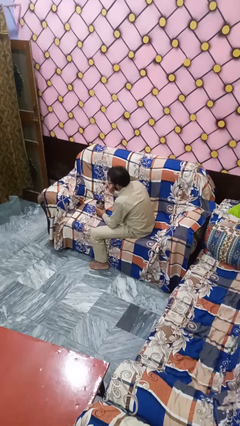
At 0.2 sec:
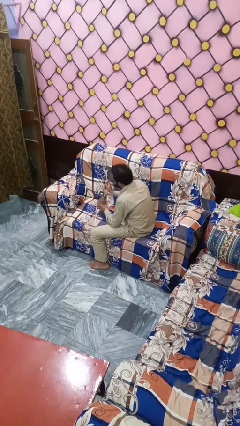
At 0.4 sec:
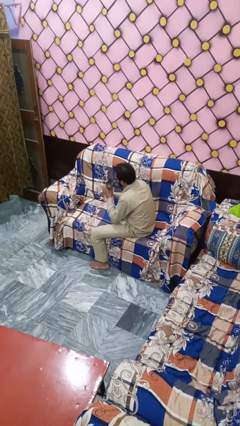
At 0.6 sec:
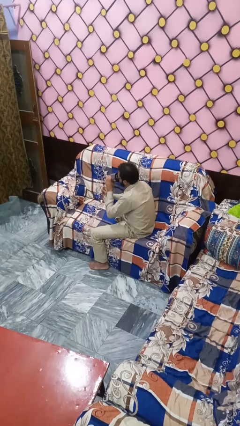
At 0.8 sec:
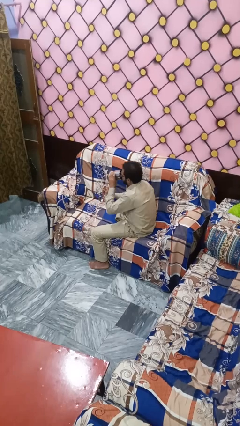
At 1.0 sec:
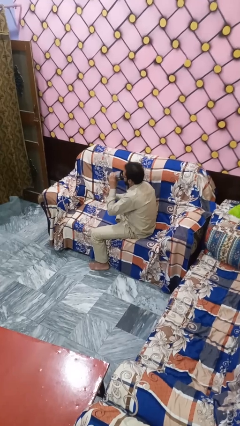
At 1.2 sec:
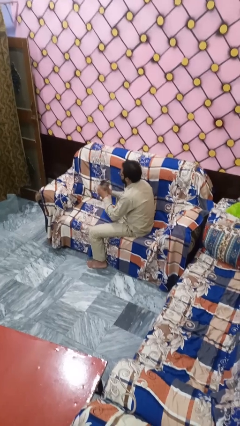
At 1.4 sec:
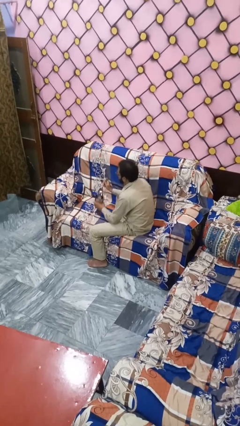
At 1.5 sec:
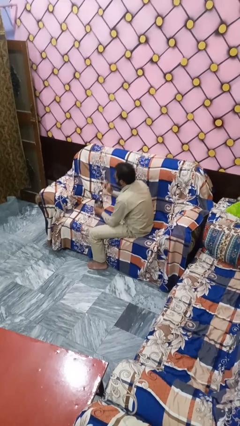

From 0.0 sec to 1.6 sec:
person drinks from mug

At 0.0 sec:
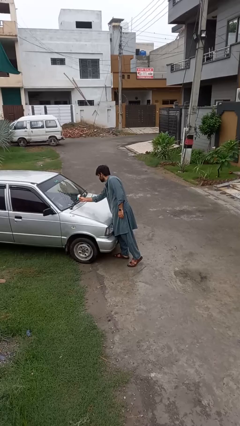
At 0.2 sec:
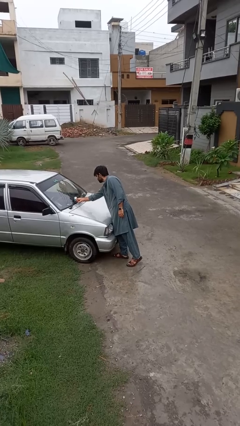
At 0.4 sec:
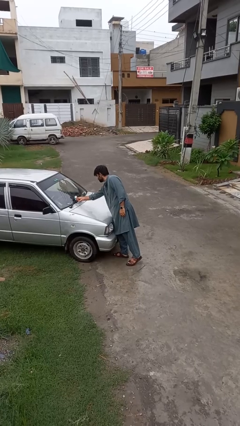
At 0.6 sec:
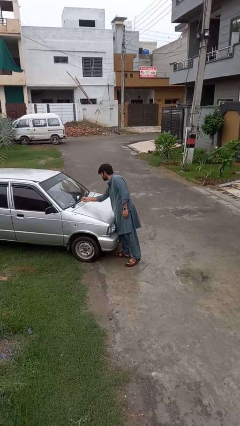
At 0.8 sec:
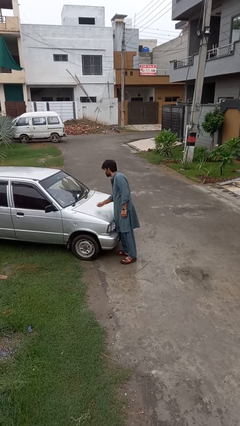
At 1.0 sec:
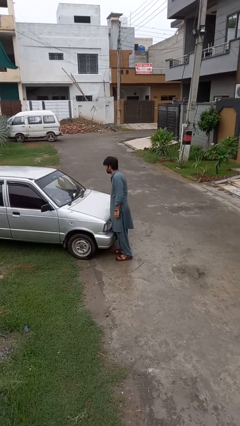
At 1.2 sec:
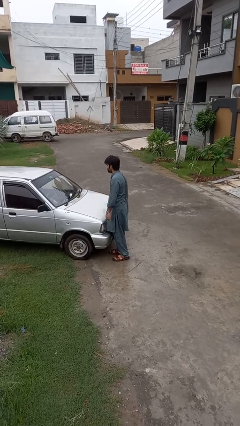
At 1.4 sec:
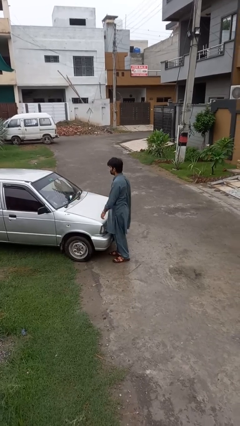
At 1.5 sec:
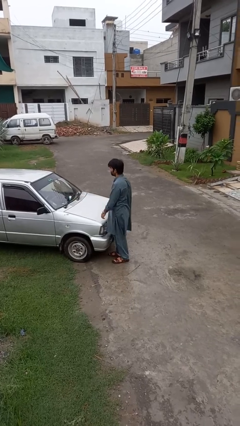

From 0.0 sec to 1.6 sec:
person flips down car wipers

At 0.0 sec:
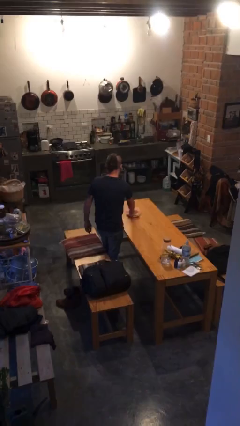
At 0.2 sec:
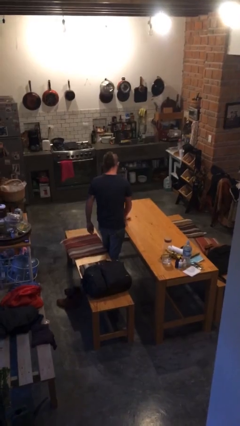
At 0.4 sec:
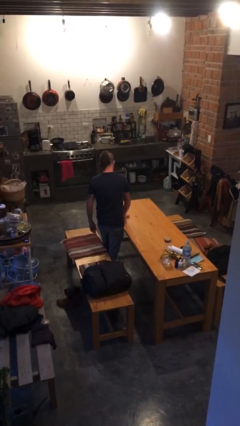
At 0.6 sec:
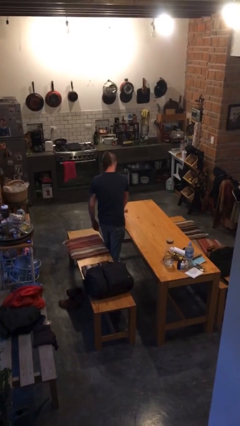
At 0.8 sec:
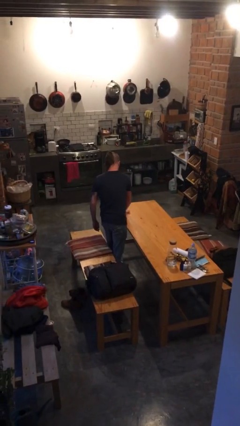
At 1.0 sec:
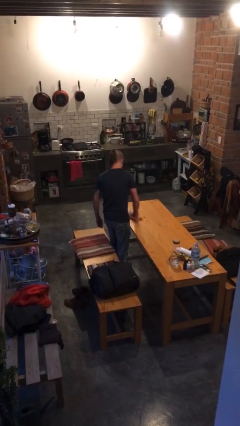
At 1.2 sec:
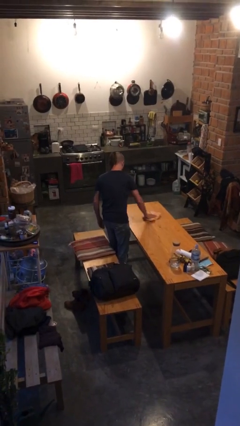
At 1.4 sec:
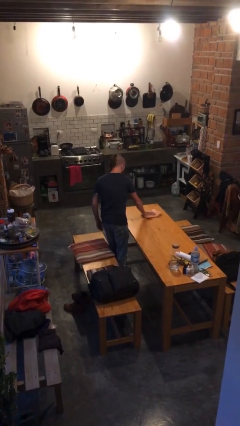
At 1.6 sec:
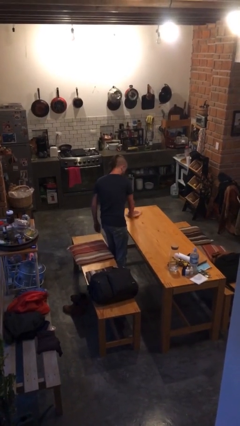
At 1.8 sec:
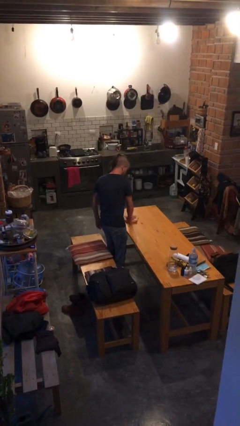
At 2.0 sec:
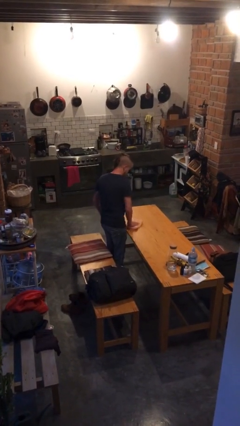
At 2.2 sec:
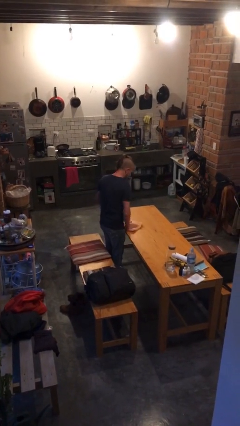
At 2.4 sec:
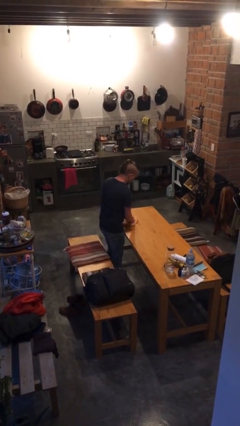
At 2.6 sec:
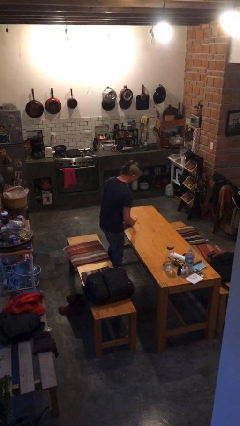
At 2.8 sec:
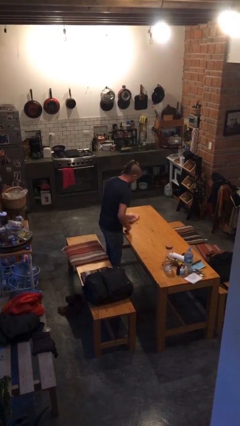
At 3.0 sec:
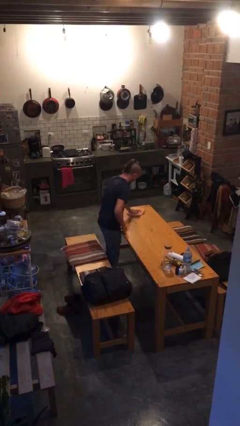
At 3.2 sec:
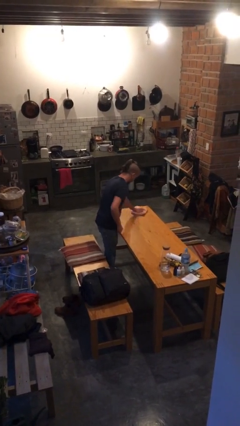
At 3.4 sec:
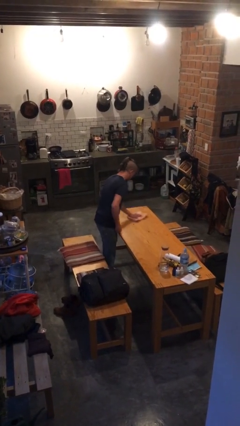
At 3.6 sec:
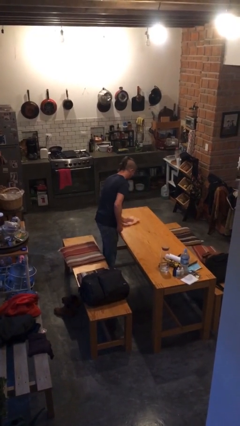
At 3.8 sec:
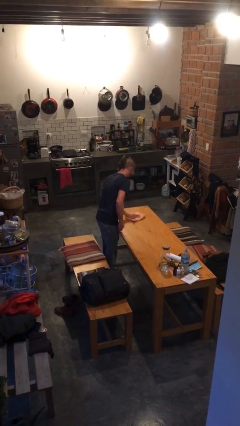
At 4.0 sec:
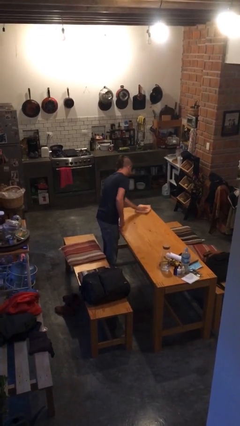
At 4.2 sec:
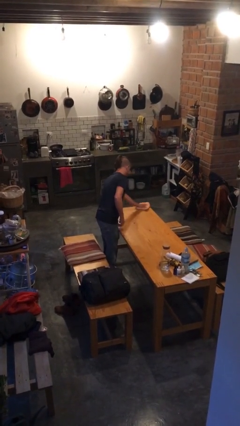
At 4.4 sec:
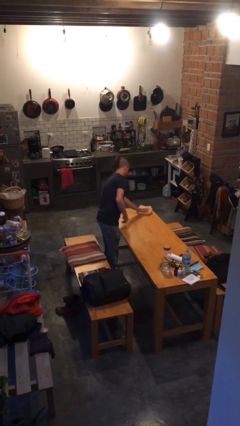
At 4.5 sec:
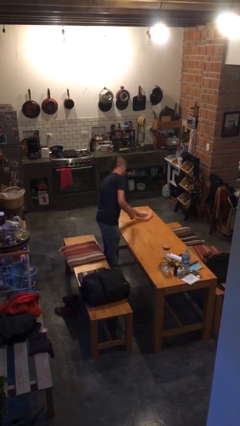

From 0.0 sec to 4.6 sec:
person cleans table with rag

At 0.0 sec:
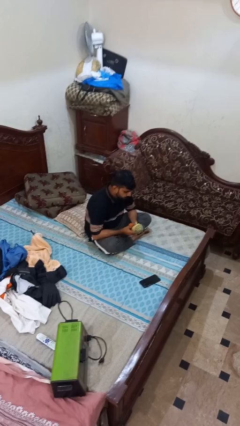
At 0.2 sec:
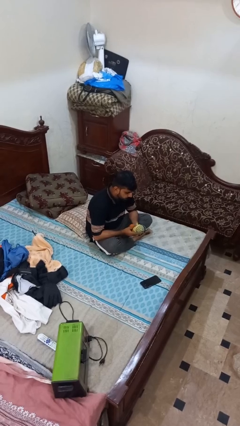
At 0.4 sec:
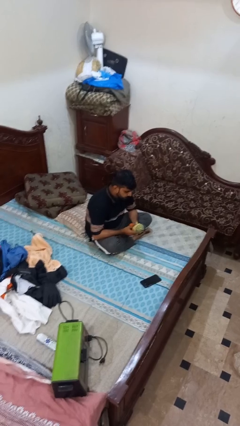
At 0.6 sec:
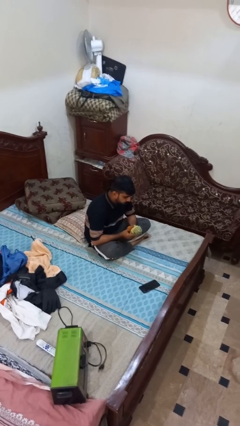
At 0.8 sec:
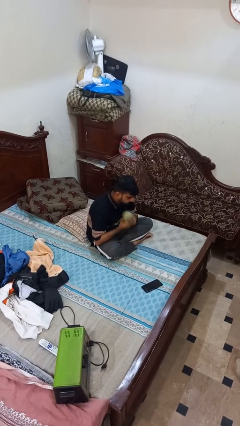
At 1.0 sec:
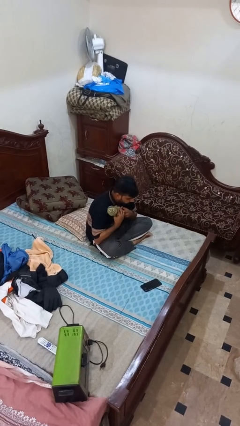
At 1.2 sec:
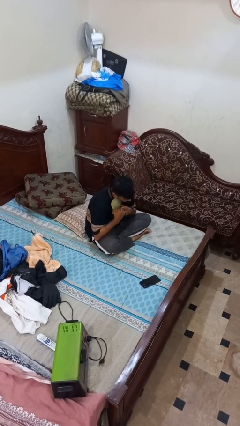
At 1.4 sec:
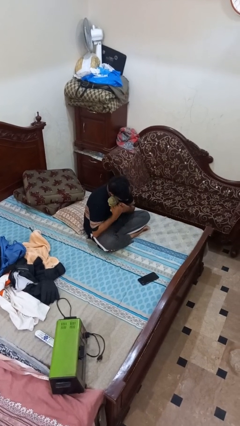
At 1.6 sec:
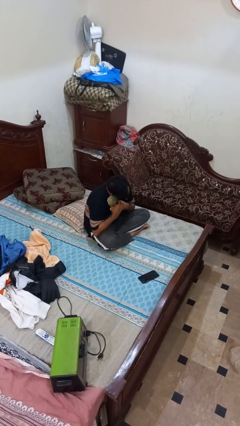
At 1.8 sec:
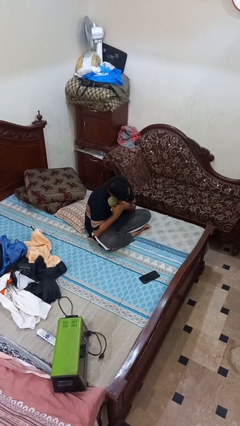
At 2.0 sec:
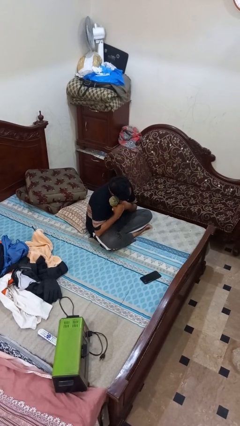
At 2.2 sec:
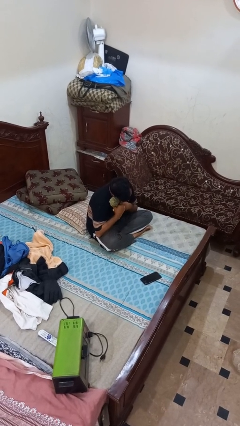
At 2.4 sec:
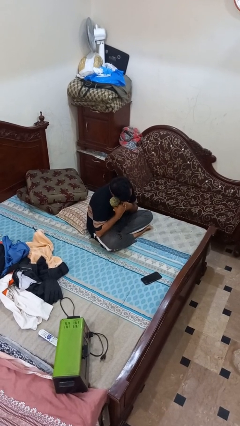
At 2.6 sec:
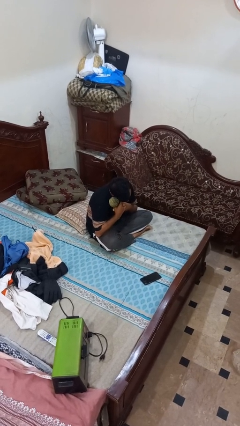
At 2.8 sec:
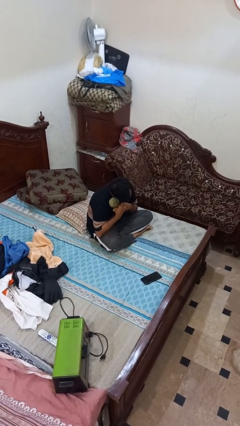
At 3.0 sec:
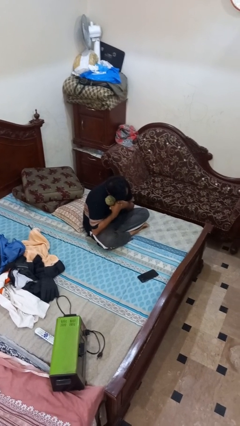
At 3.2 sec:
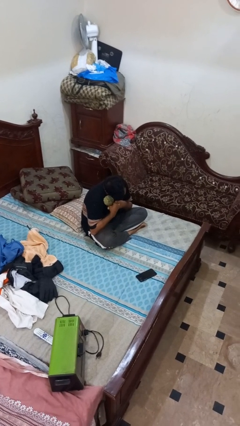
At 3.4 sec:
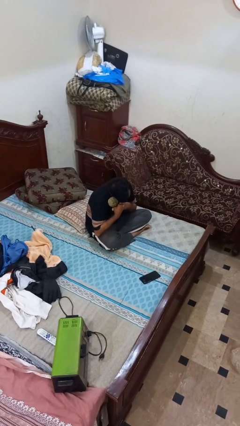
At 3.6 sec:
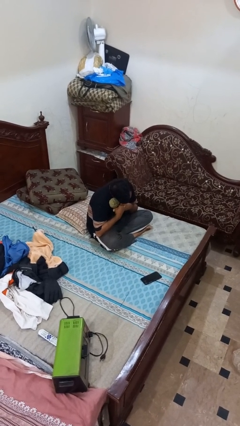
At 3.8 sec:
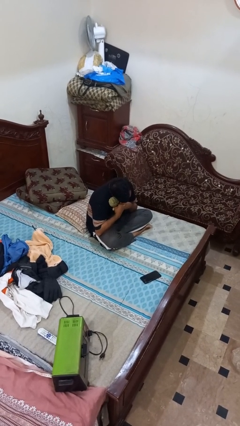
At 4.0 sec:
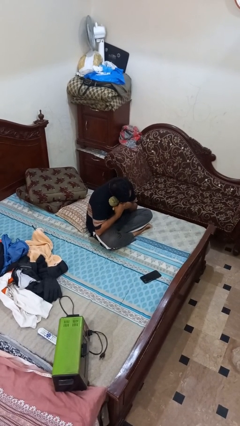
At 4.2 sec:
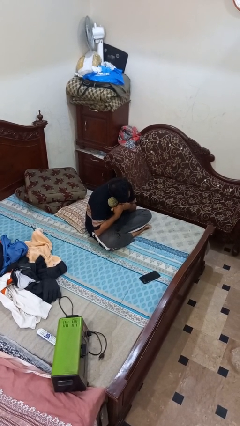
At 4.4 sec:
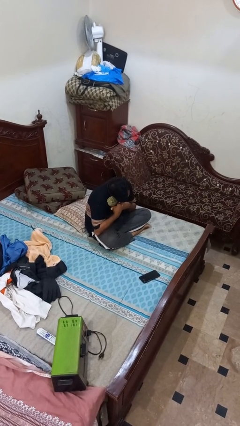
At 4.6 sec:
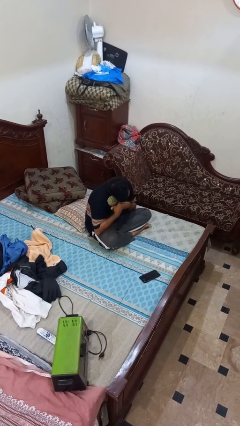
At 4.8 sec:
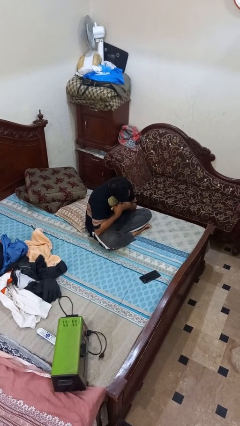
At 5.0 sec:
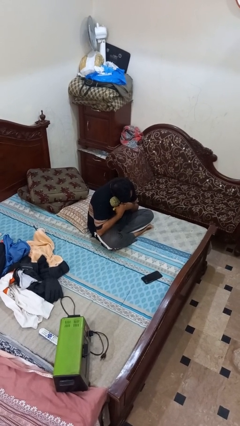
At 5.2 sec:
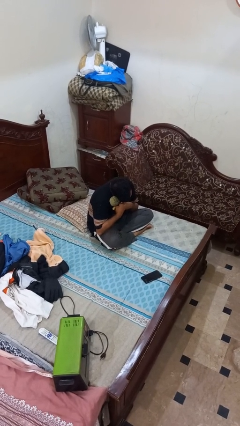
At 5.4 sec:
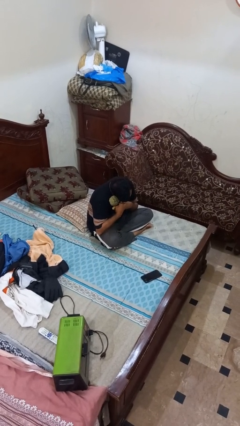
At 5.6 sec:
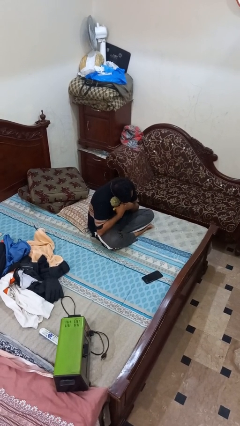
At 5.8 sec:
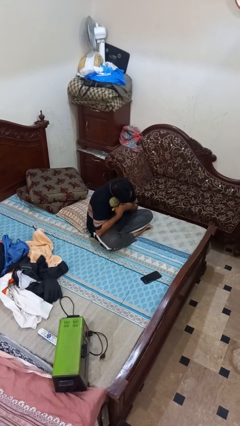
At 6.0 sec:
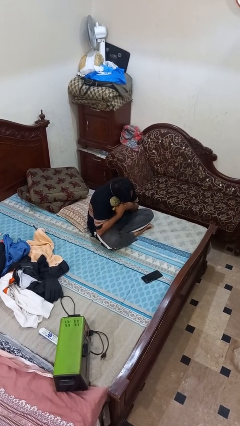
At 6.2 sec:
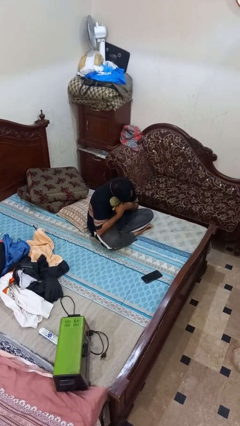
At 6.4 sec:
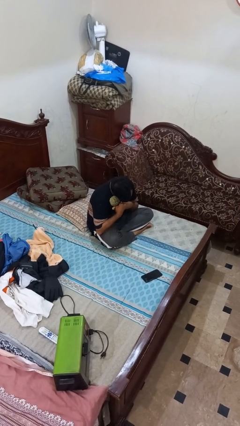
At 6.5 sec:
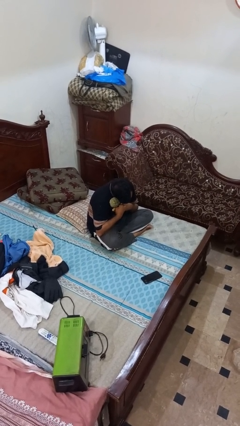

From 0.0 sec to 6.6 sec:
person hugs stuffed animal

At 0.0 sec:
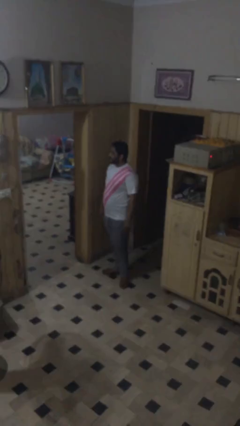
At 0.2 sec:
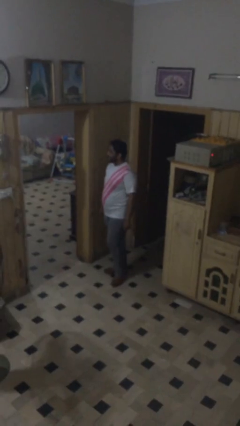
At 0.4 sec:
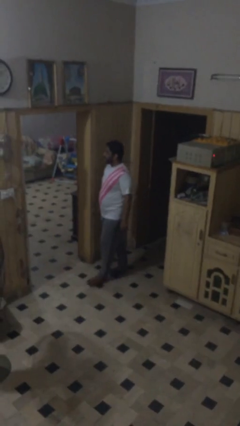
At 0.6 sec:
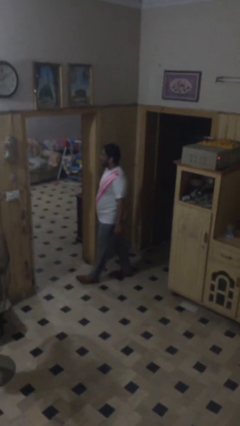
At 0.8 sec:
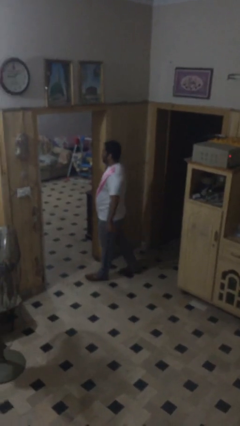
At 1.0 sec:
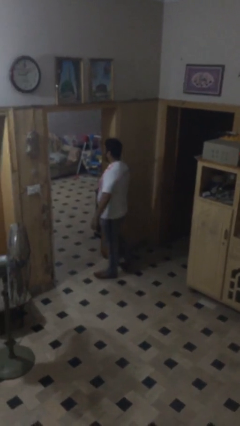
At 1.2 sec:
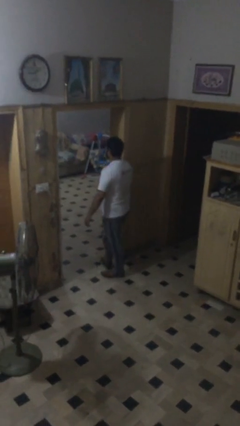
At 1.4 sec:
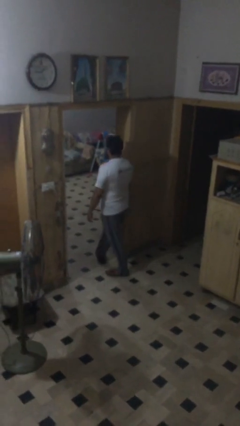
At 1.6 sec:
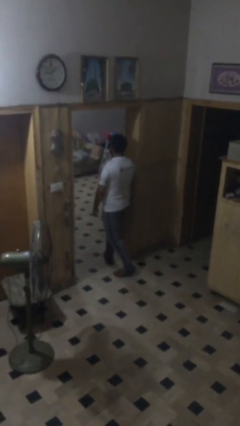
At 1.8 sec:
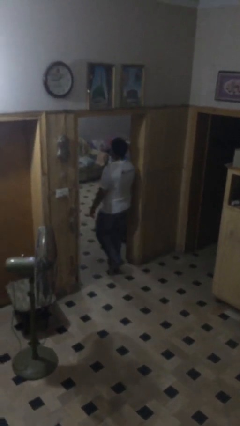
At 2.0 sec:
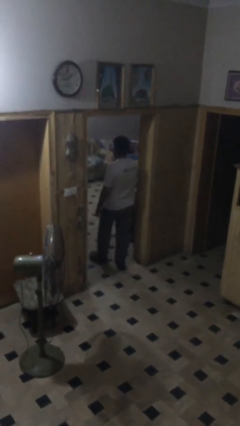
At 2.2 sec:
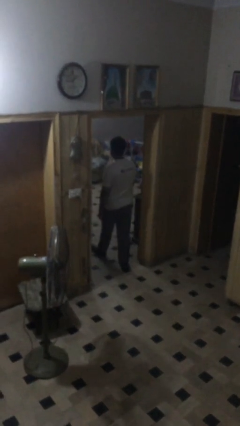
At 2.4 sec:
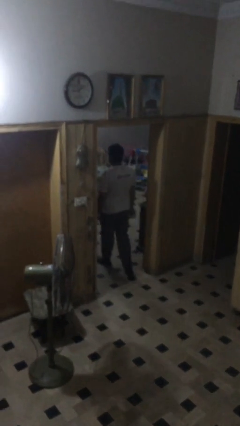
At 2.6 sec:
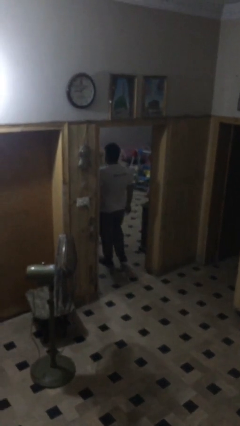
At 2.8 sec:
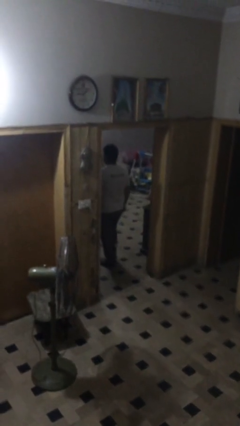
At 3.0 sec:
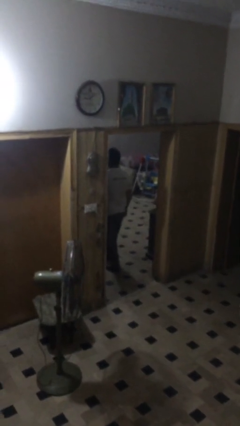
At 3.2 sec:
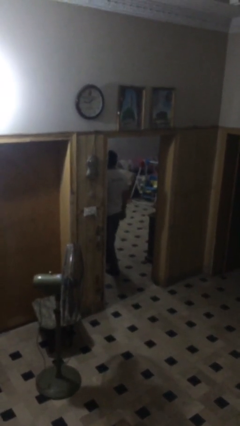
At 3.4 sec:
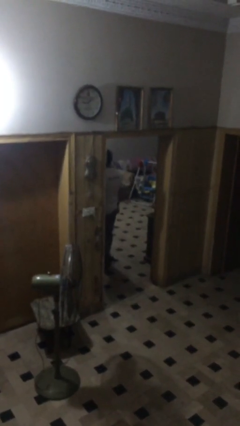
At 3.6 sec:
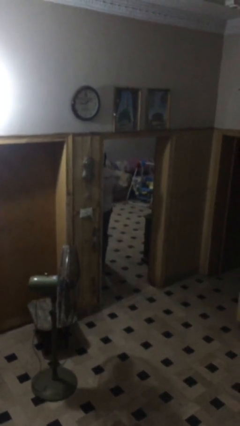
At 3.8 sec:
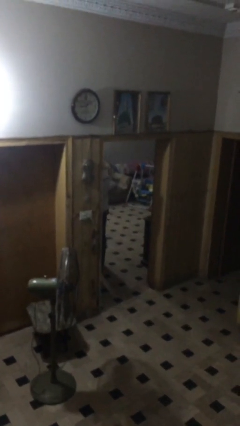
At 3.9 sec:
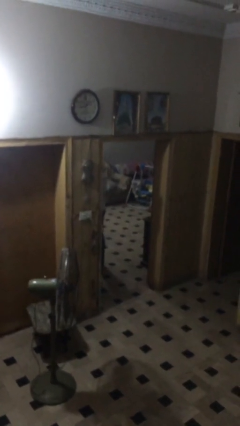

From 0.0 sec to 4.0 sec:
person exits scene through structure
